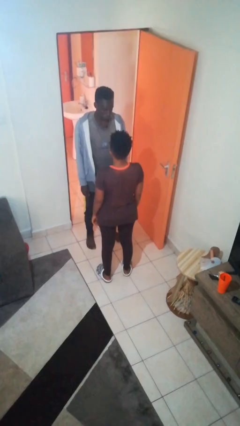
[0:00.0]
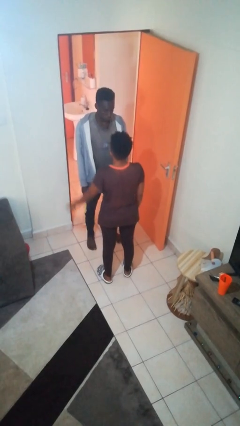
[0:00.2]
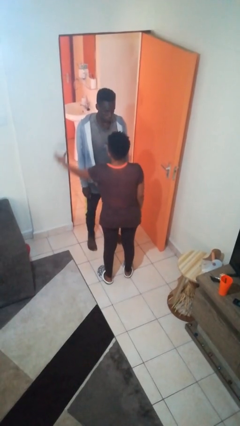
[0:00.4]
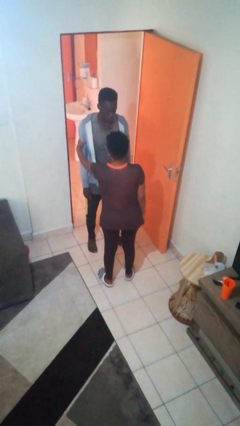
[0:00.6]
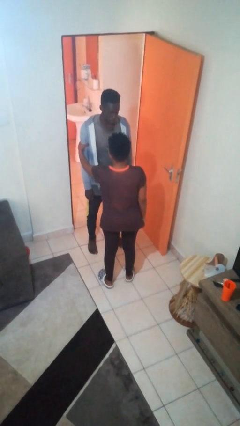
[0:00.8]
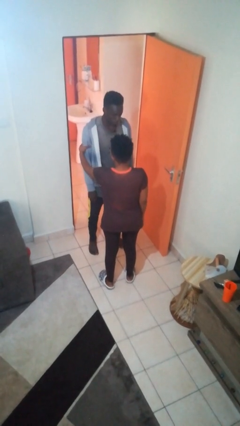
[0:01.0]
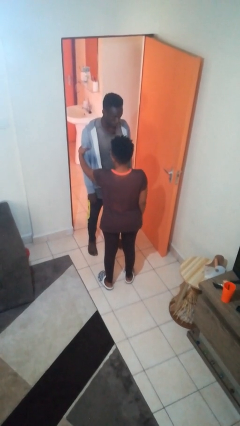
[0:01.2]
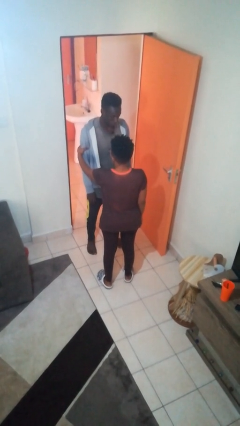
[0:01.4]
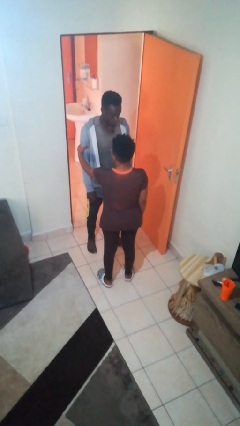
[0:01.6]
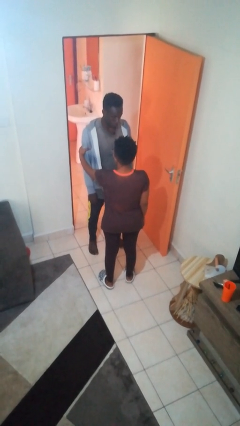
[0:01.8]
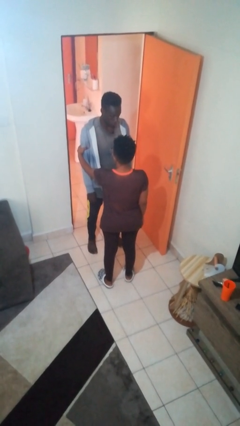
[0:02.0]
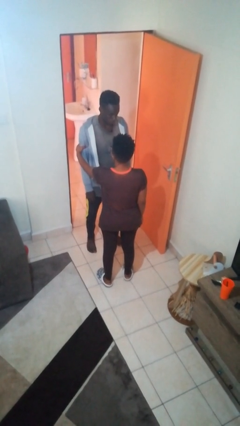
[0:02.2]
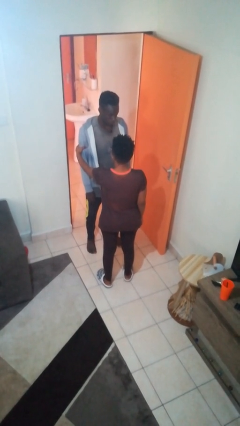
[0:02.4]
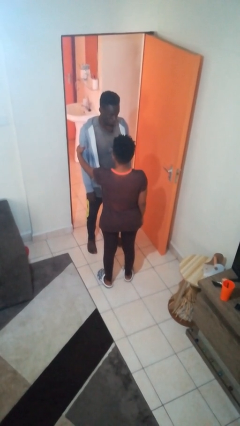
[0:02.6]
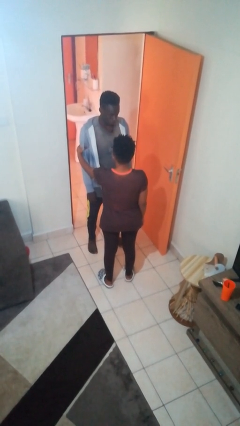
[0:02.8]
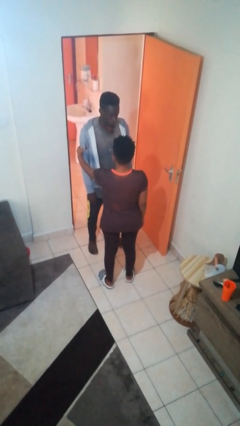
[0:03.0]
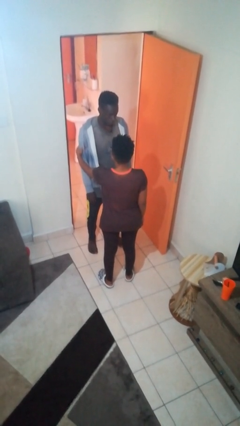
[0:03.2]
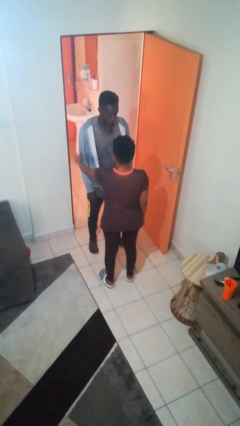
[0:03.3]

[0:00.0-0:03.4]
person grabs person by bicep

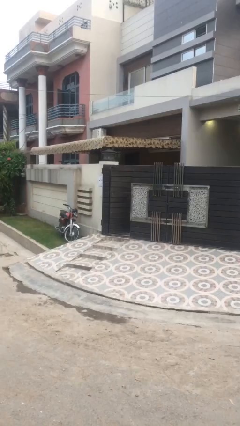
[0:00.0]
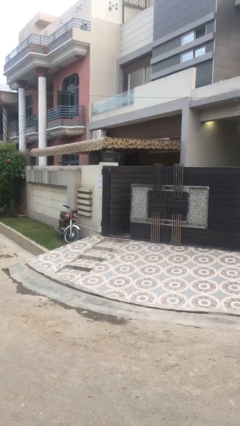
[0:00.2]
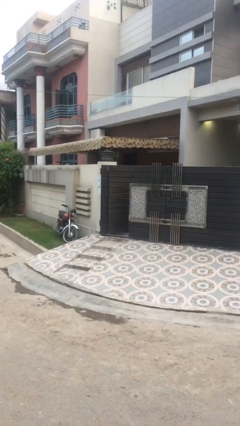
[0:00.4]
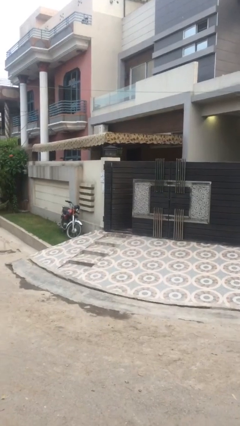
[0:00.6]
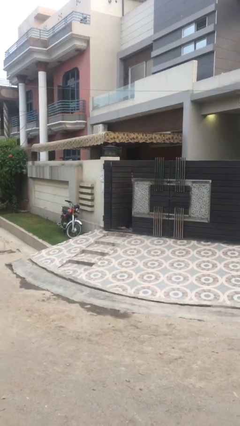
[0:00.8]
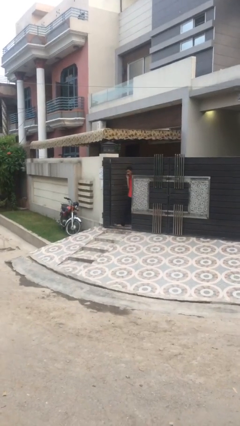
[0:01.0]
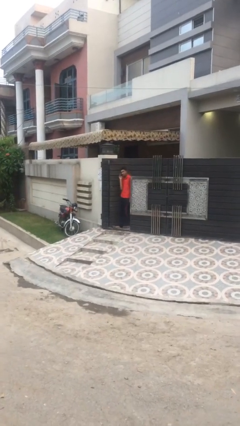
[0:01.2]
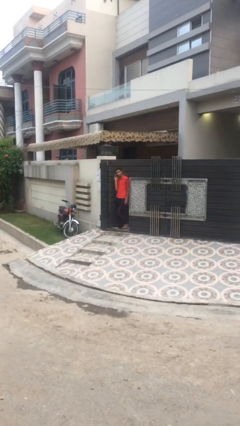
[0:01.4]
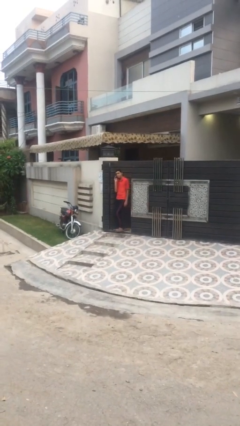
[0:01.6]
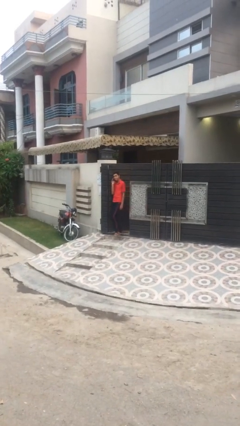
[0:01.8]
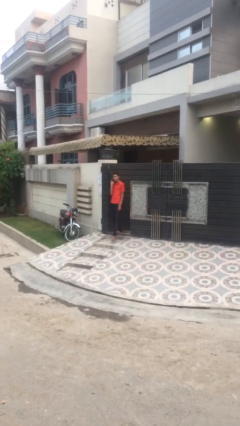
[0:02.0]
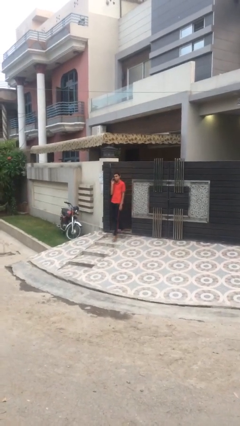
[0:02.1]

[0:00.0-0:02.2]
person enters scene through structure

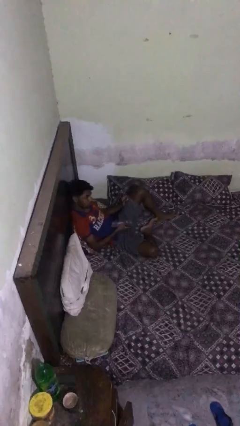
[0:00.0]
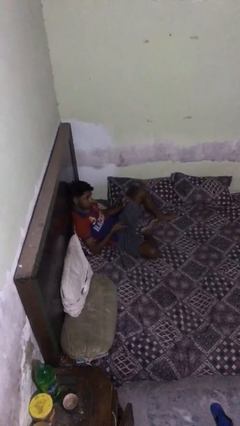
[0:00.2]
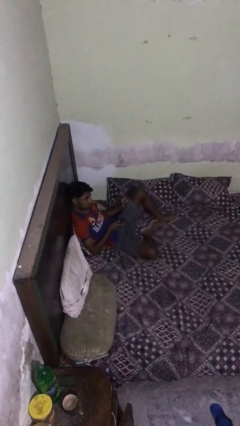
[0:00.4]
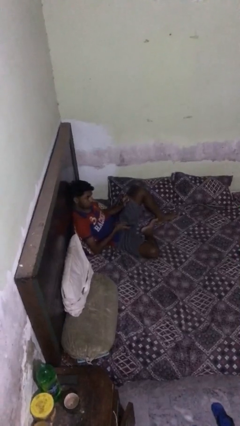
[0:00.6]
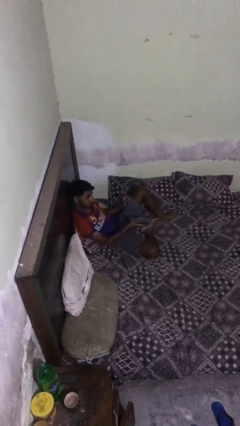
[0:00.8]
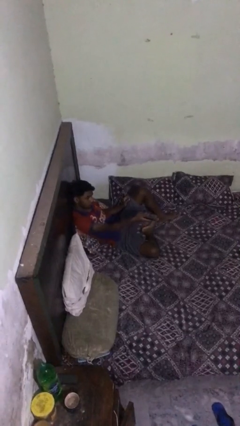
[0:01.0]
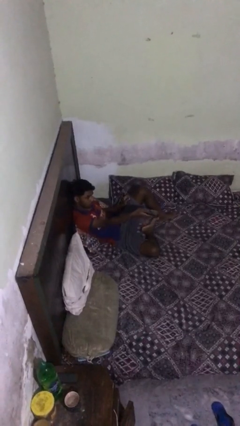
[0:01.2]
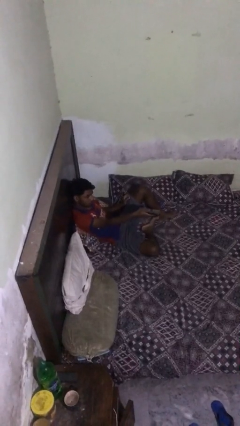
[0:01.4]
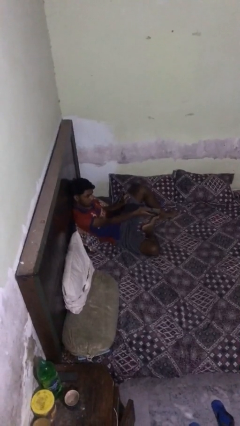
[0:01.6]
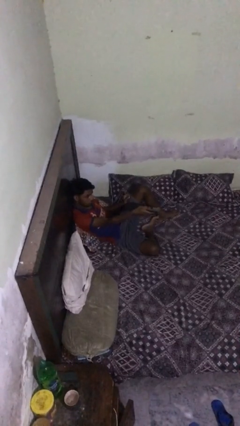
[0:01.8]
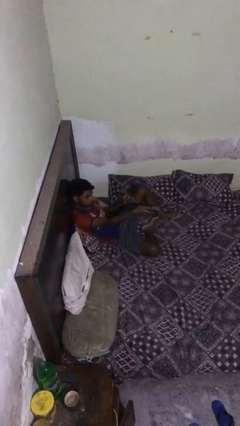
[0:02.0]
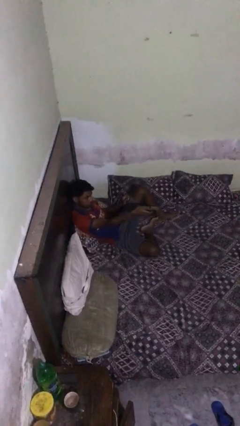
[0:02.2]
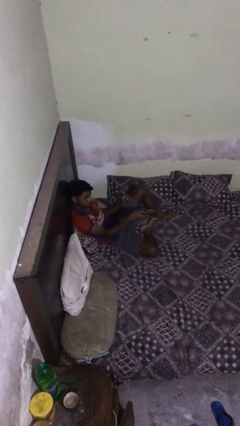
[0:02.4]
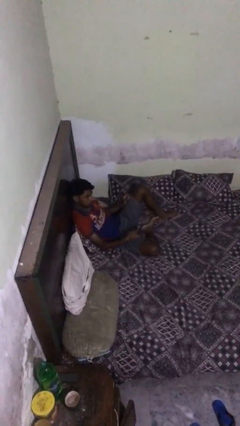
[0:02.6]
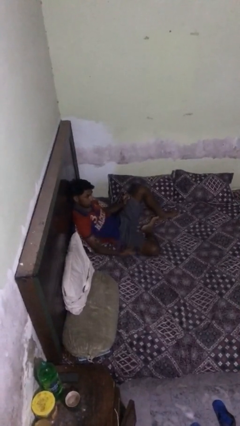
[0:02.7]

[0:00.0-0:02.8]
person uses television remote

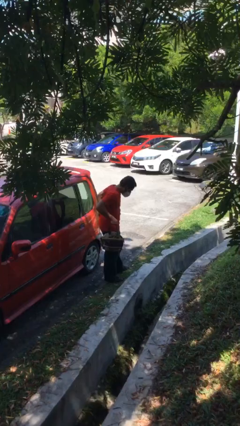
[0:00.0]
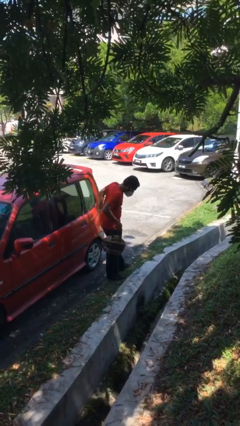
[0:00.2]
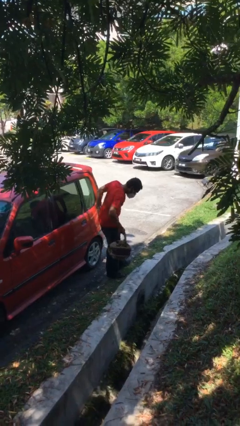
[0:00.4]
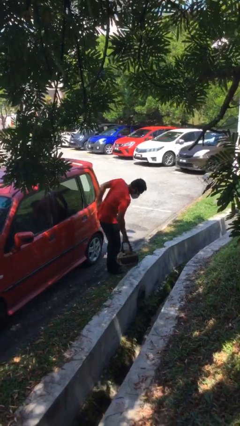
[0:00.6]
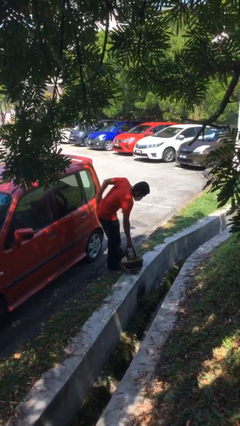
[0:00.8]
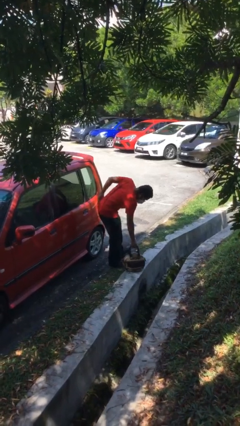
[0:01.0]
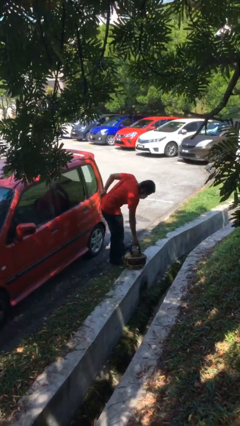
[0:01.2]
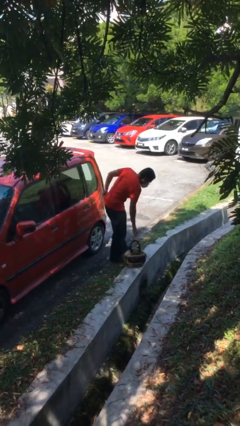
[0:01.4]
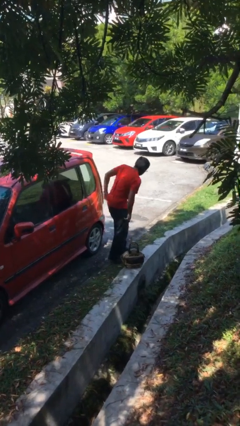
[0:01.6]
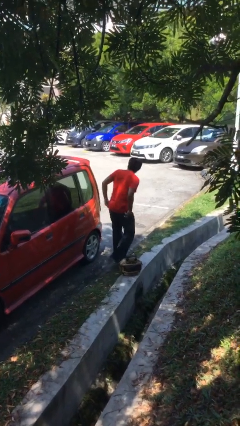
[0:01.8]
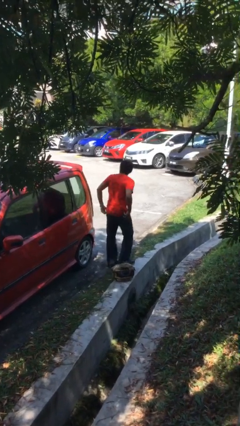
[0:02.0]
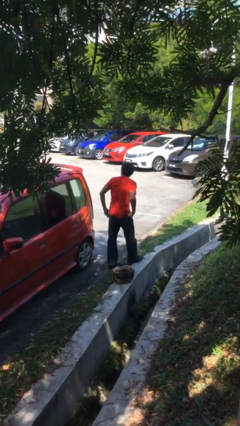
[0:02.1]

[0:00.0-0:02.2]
person puts down object on floor

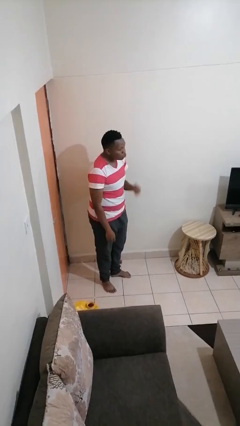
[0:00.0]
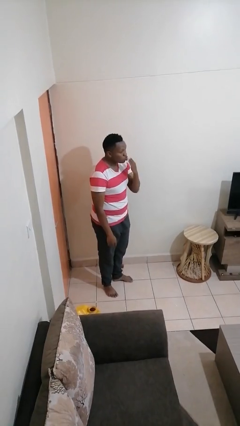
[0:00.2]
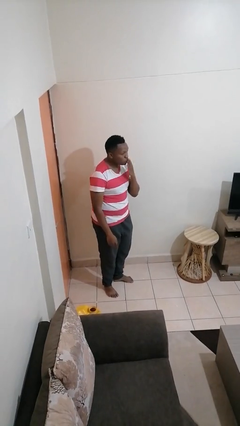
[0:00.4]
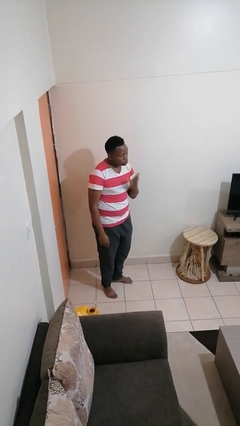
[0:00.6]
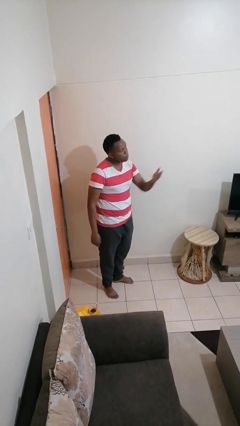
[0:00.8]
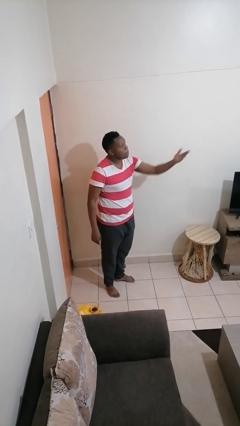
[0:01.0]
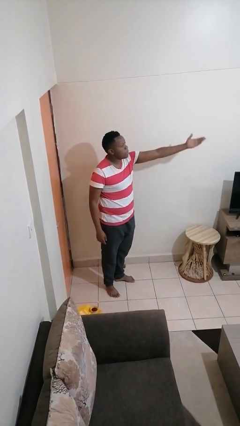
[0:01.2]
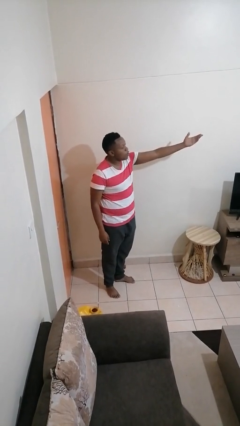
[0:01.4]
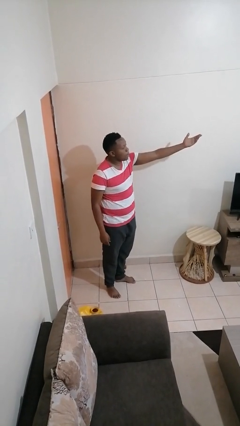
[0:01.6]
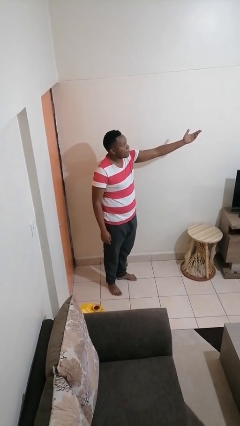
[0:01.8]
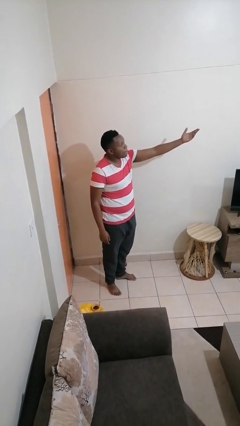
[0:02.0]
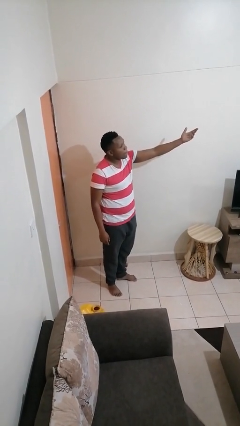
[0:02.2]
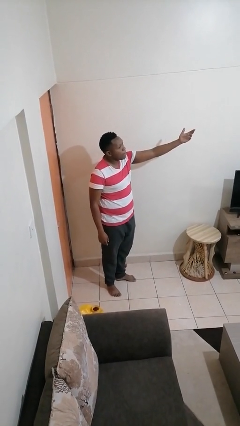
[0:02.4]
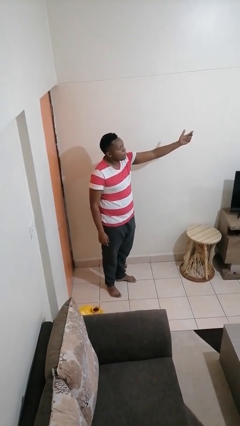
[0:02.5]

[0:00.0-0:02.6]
person gestures blow kiss

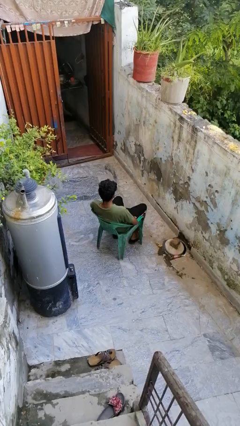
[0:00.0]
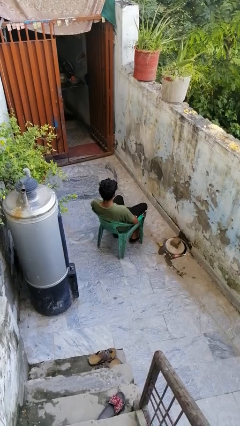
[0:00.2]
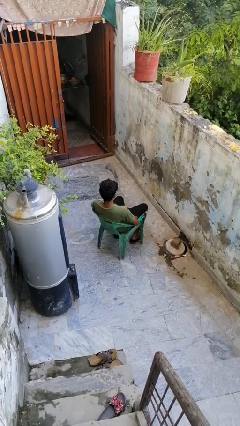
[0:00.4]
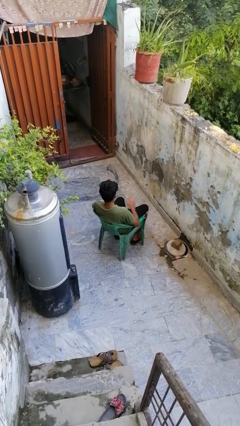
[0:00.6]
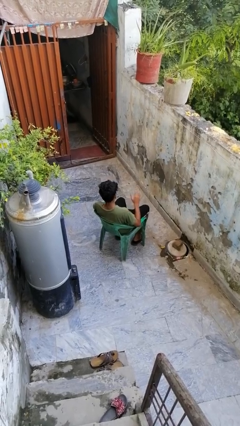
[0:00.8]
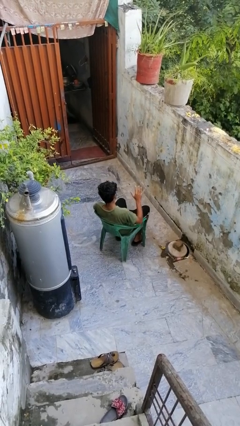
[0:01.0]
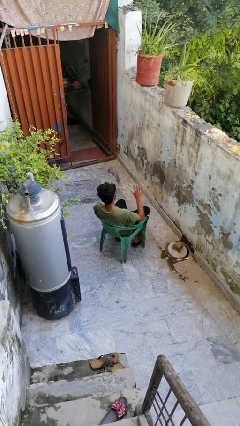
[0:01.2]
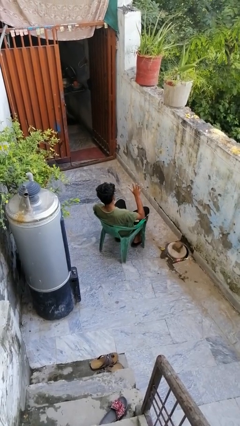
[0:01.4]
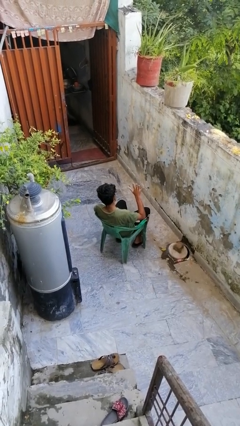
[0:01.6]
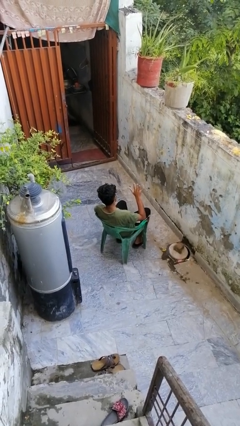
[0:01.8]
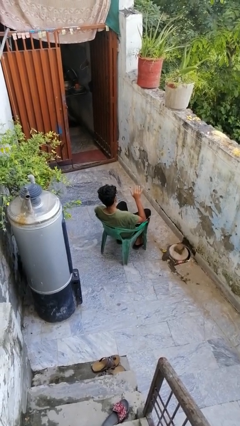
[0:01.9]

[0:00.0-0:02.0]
person gestures number five

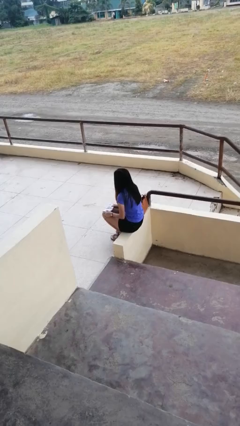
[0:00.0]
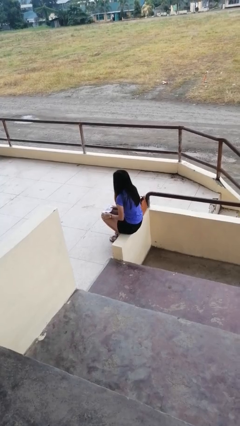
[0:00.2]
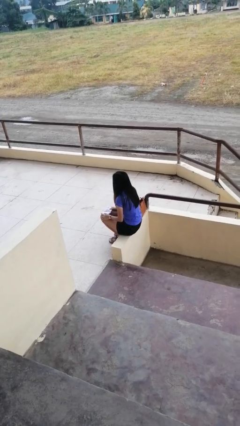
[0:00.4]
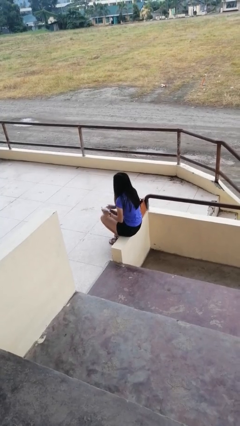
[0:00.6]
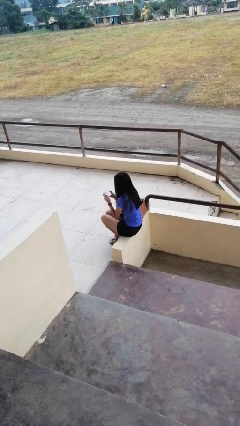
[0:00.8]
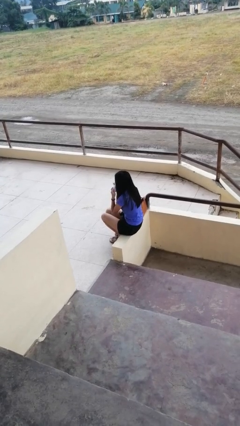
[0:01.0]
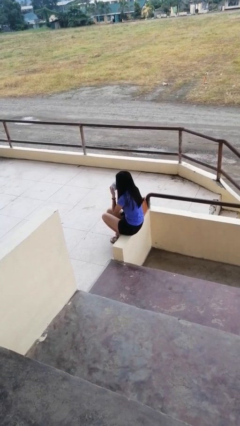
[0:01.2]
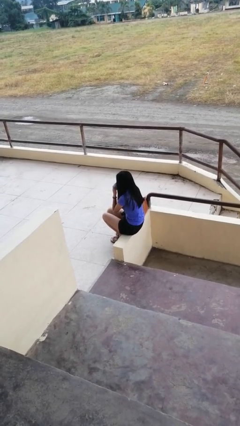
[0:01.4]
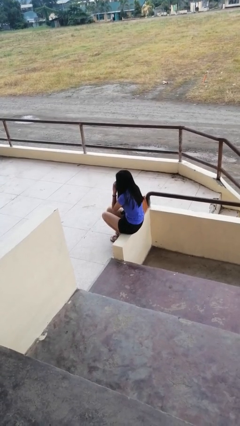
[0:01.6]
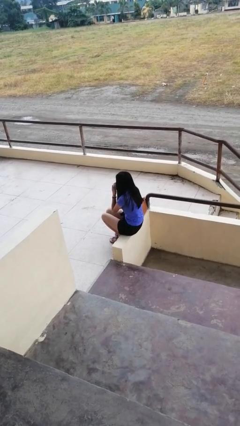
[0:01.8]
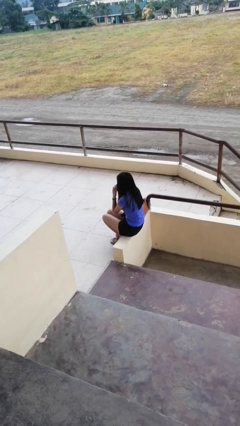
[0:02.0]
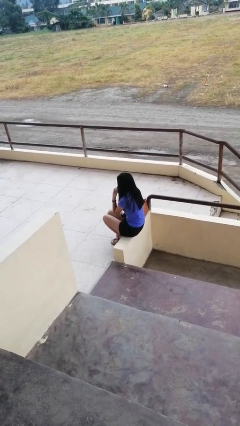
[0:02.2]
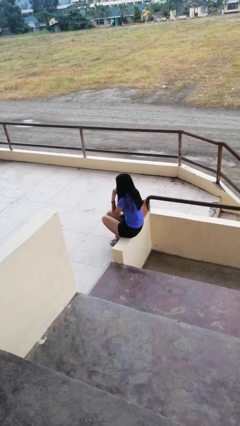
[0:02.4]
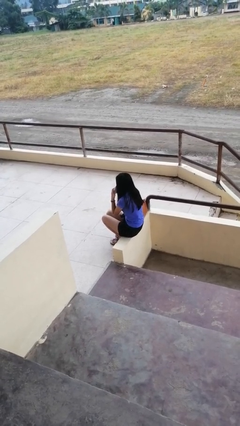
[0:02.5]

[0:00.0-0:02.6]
person wipes mouth with napkin
